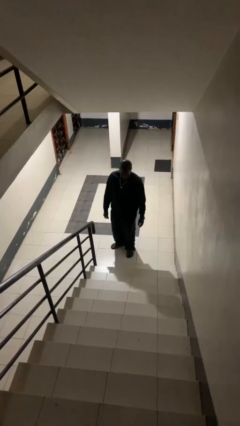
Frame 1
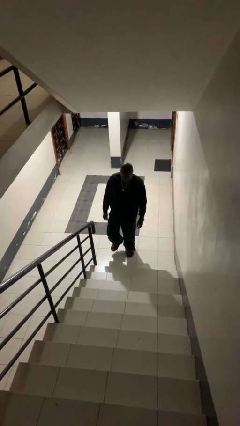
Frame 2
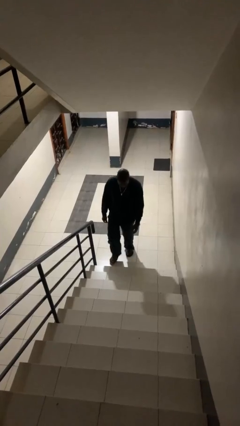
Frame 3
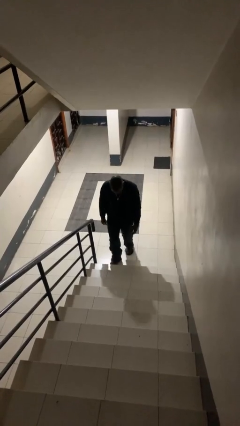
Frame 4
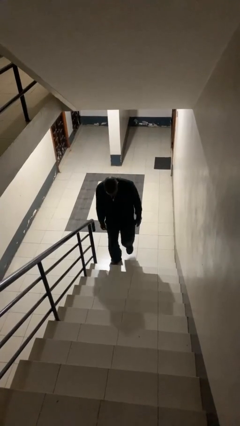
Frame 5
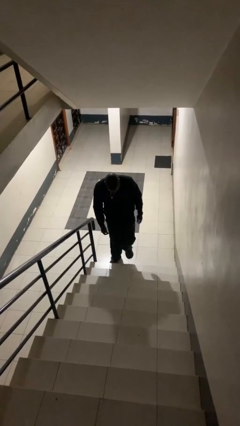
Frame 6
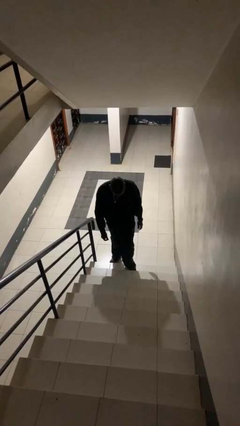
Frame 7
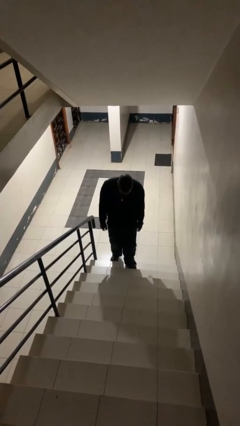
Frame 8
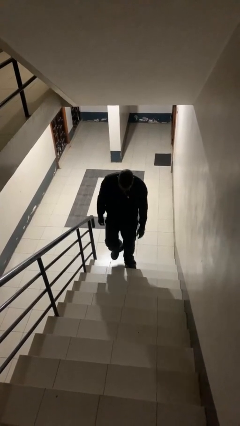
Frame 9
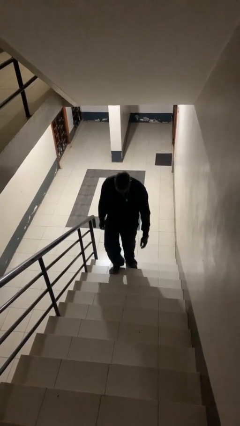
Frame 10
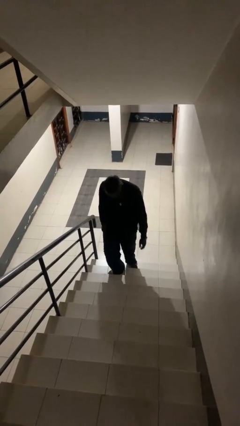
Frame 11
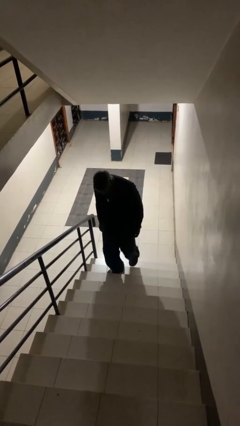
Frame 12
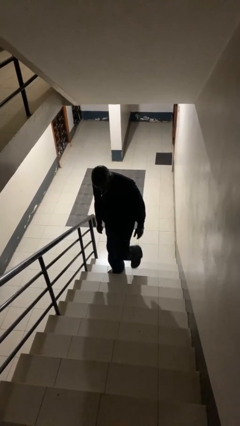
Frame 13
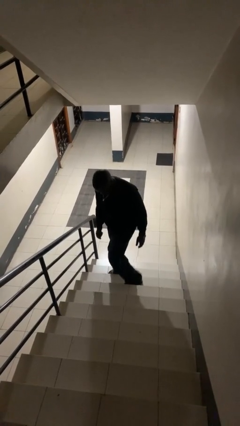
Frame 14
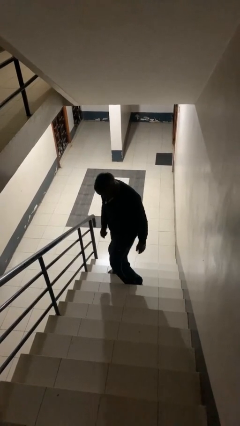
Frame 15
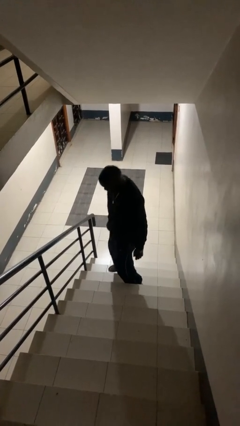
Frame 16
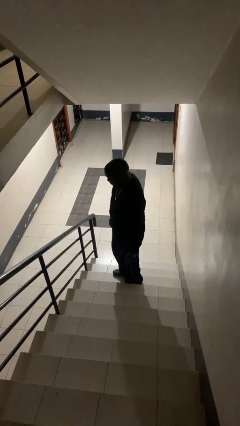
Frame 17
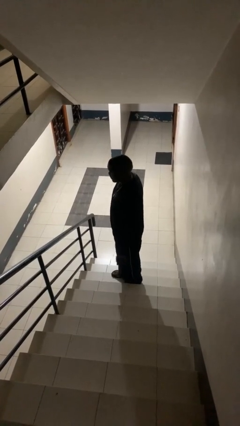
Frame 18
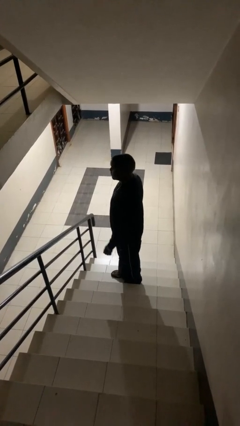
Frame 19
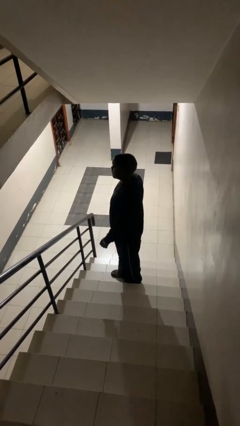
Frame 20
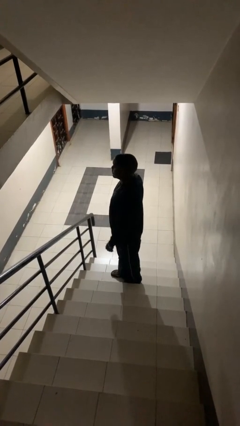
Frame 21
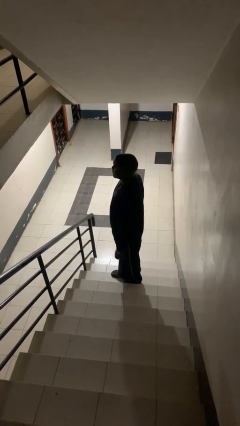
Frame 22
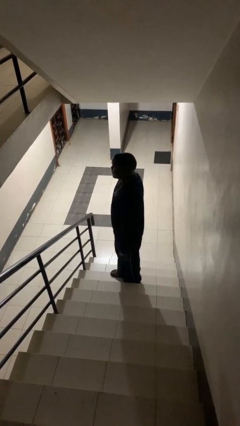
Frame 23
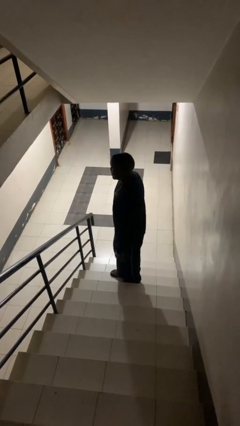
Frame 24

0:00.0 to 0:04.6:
person climbs up stairs

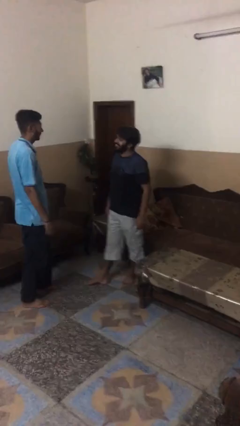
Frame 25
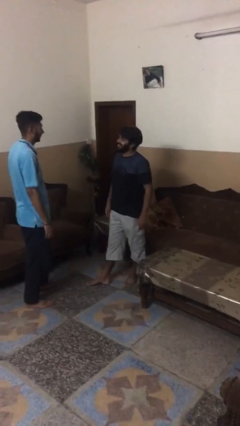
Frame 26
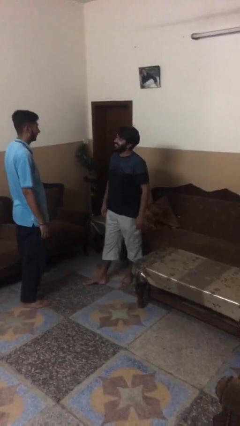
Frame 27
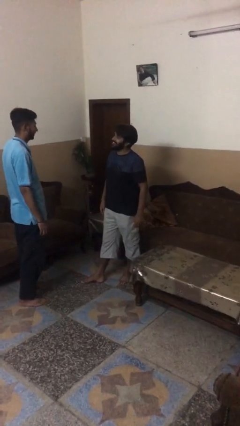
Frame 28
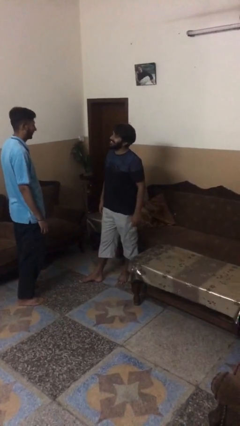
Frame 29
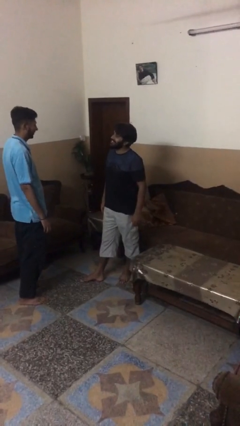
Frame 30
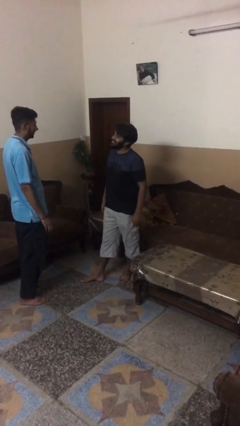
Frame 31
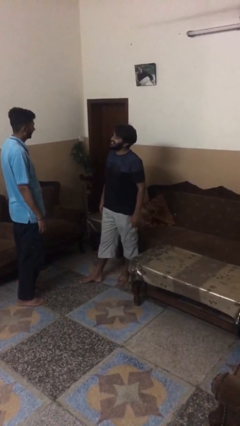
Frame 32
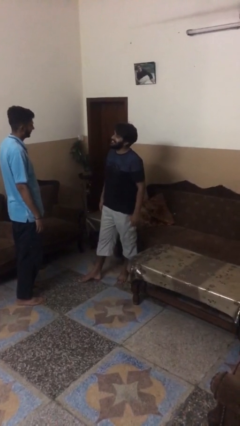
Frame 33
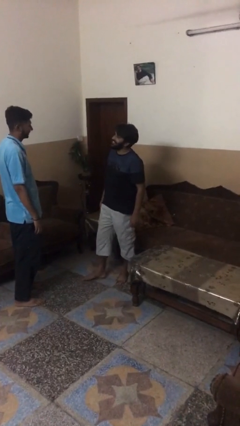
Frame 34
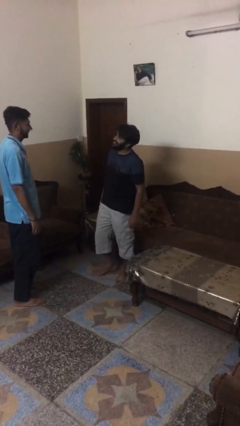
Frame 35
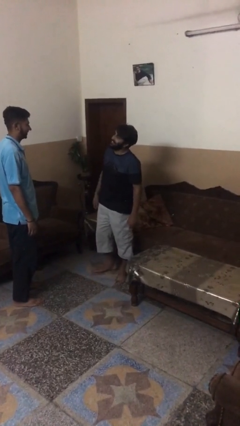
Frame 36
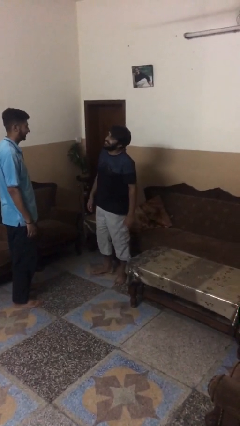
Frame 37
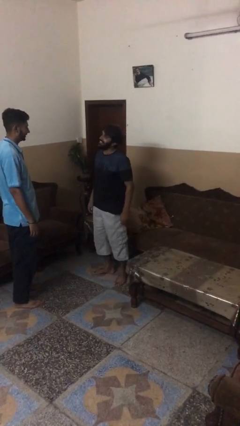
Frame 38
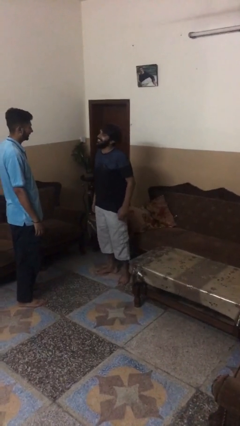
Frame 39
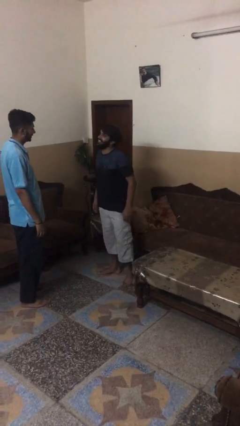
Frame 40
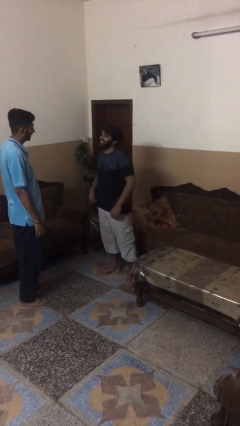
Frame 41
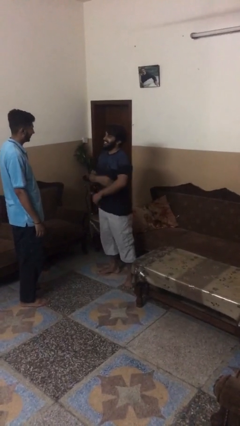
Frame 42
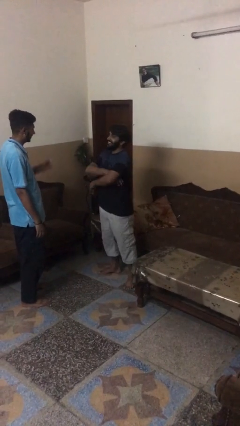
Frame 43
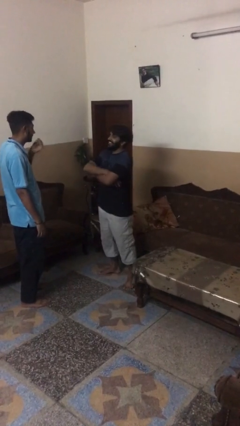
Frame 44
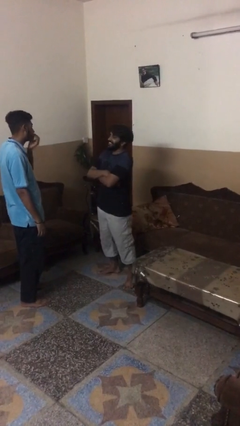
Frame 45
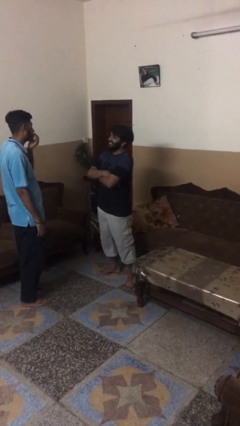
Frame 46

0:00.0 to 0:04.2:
person talks to person

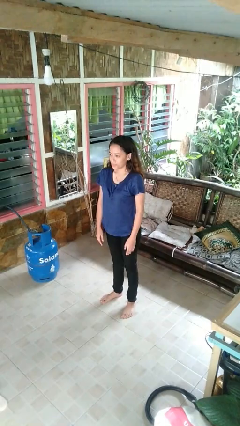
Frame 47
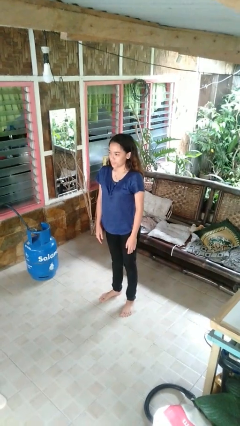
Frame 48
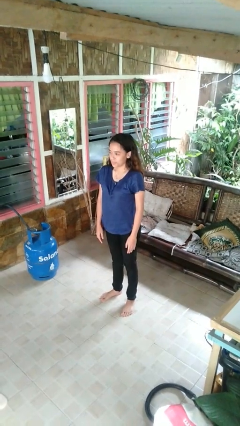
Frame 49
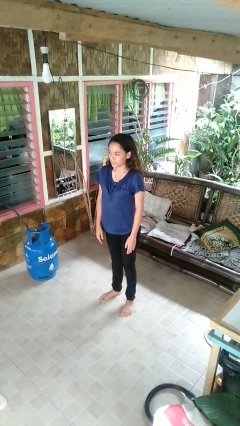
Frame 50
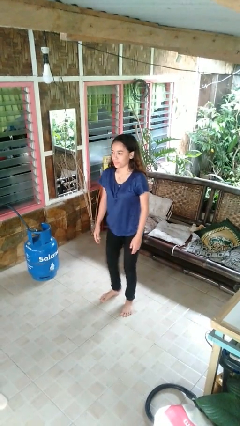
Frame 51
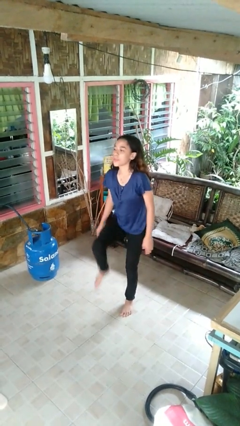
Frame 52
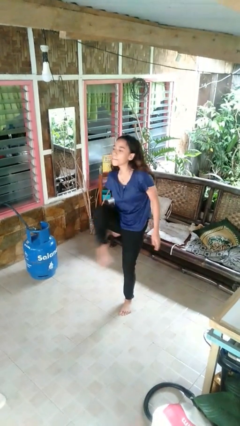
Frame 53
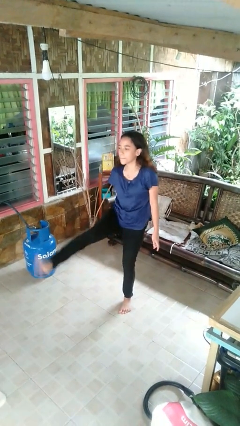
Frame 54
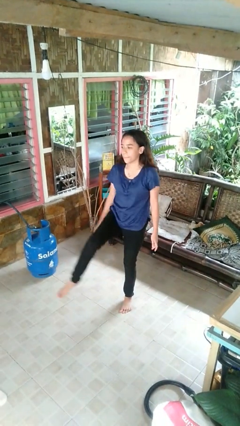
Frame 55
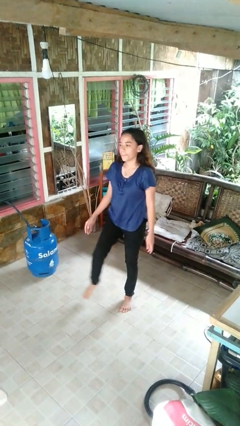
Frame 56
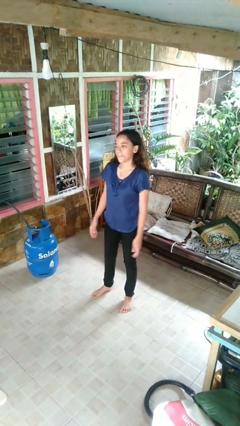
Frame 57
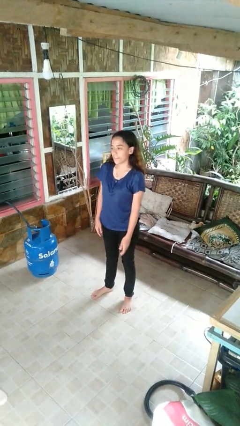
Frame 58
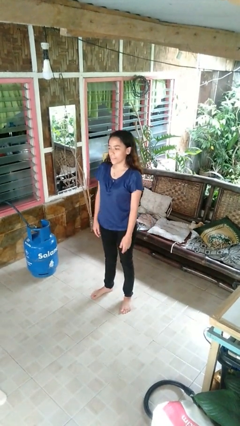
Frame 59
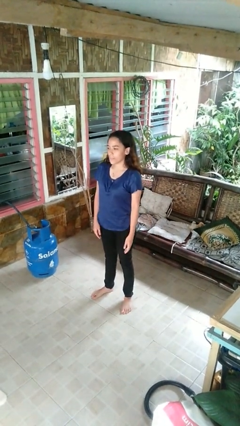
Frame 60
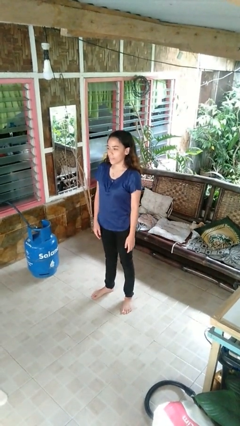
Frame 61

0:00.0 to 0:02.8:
person karate kicks

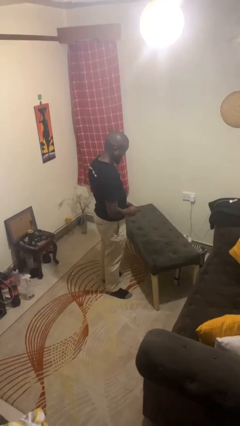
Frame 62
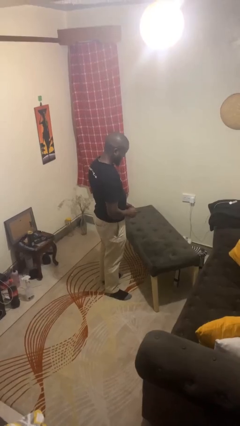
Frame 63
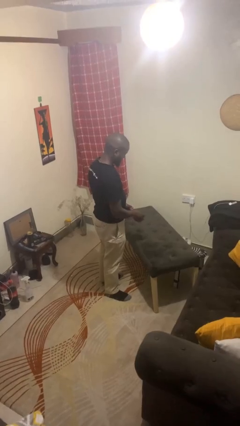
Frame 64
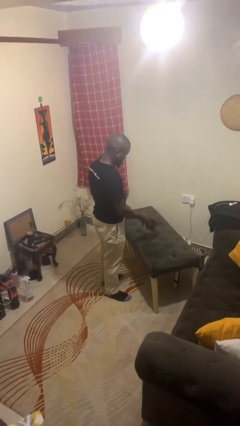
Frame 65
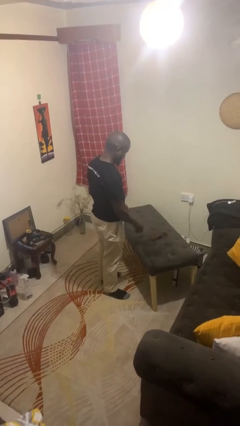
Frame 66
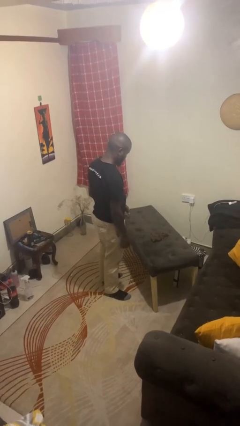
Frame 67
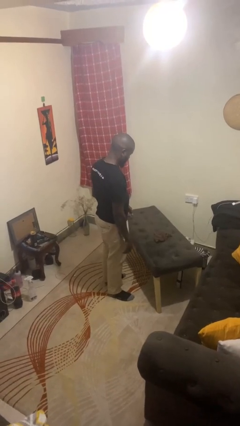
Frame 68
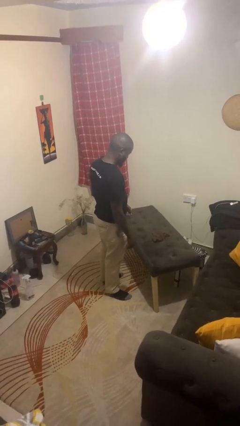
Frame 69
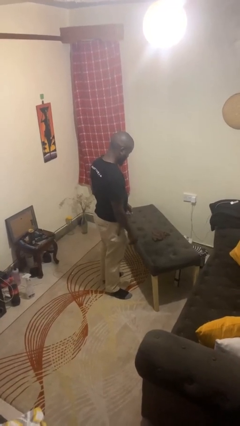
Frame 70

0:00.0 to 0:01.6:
person throws object on table

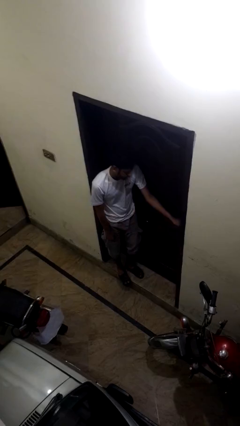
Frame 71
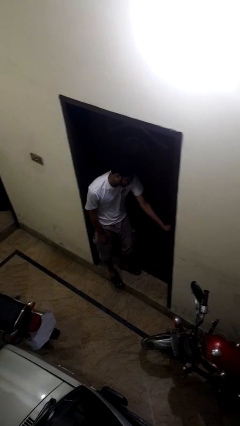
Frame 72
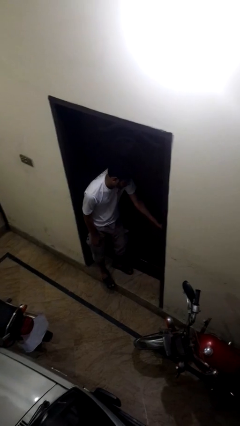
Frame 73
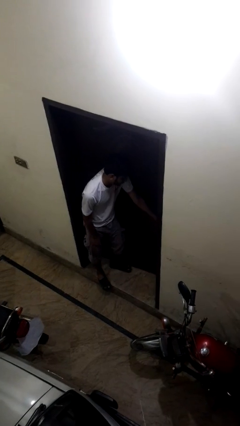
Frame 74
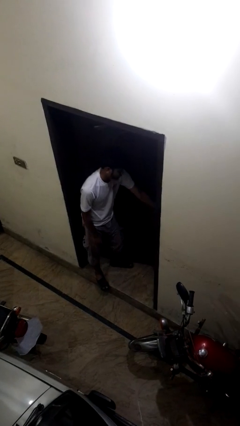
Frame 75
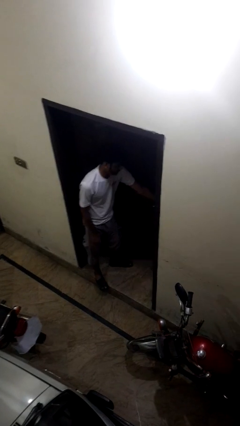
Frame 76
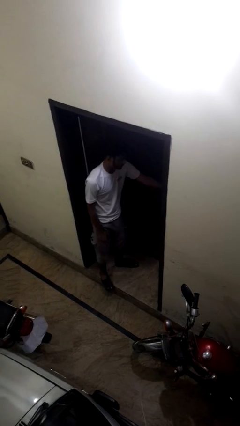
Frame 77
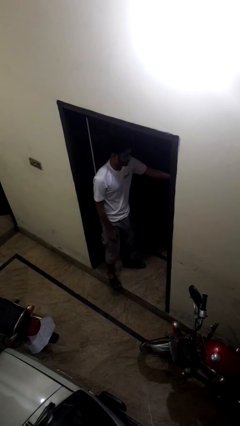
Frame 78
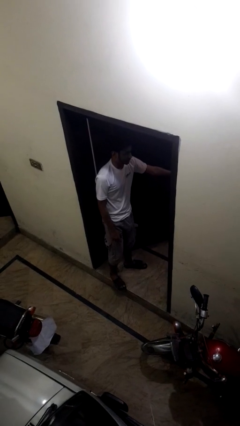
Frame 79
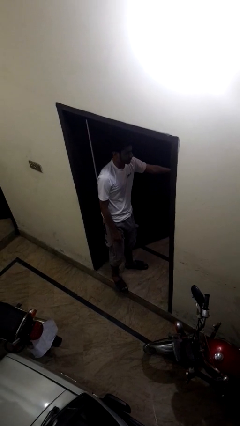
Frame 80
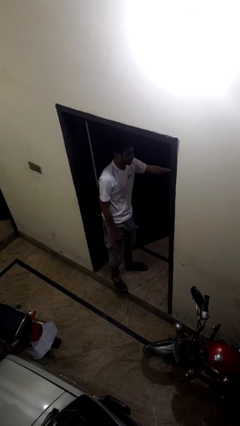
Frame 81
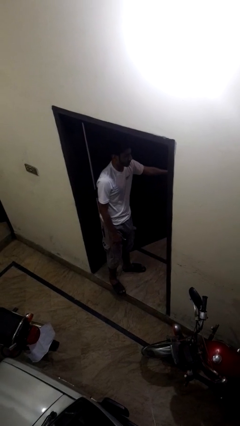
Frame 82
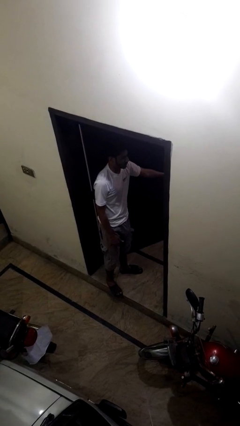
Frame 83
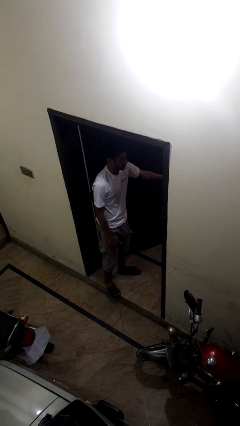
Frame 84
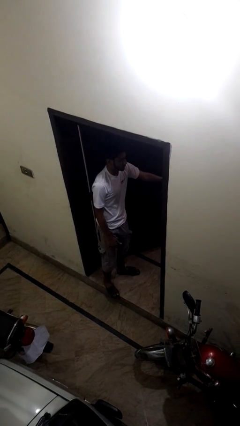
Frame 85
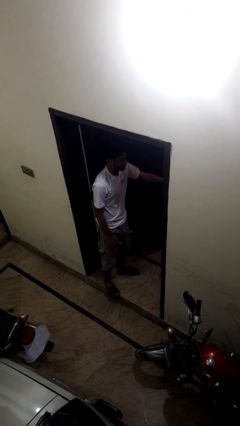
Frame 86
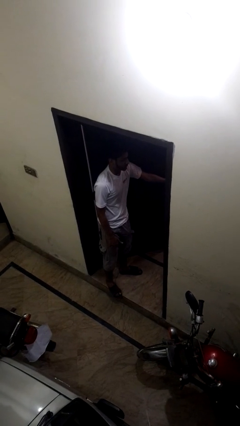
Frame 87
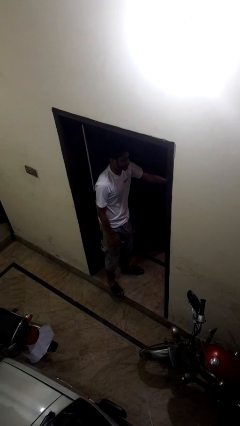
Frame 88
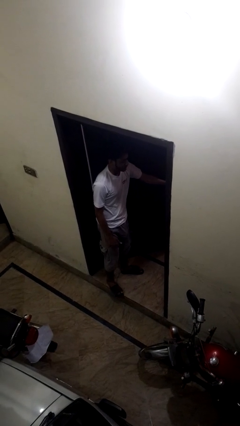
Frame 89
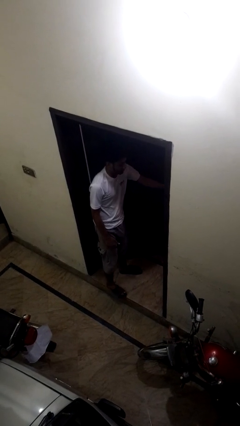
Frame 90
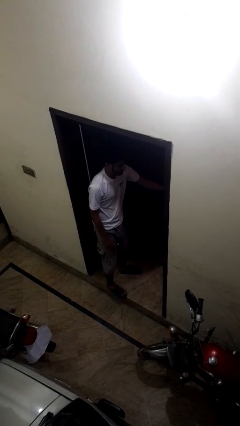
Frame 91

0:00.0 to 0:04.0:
person opens facility door

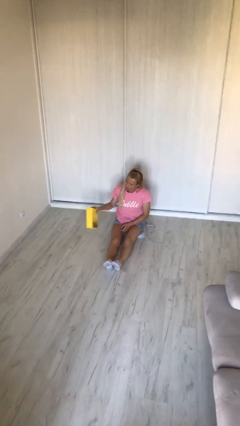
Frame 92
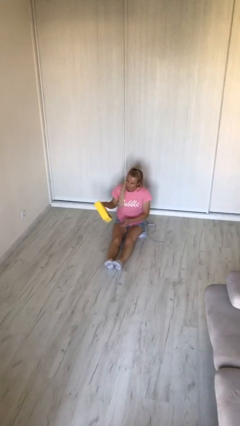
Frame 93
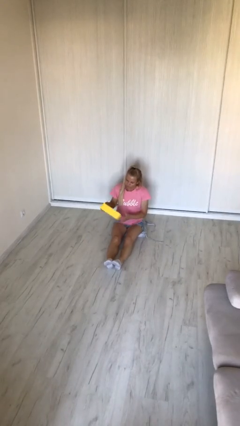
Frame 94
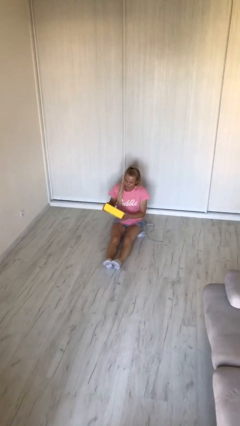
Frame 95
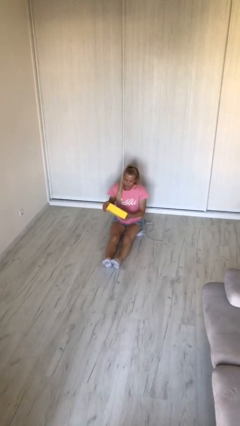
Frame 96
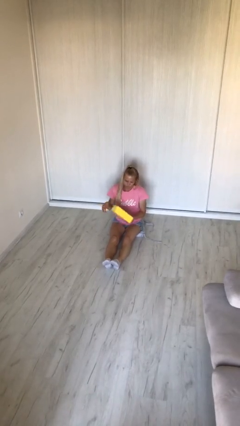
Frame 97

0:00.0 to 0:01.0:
person picks up object from floor
